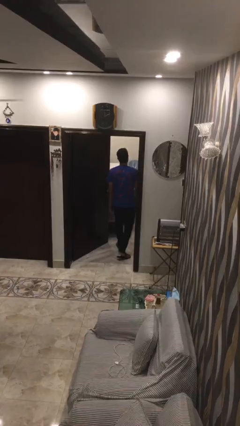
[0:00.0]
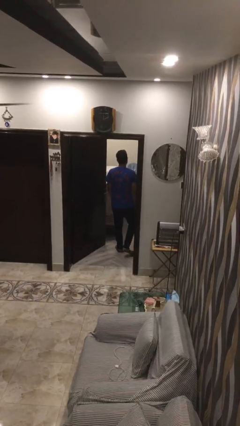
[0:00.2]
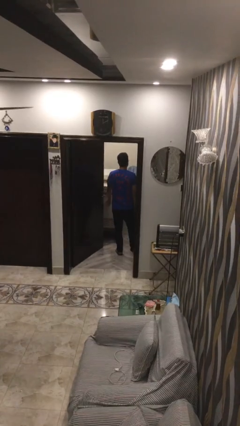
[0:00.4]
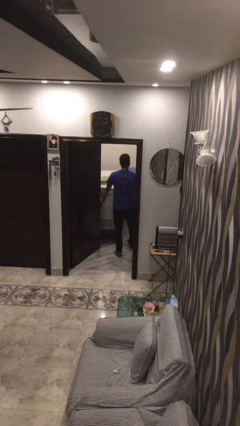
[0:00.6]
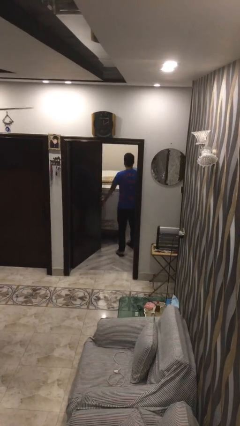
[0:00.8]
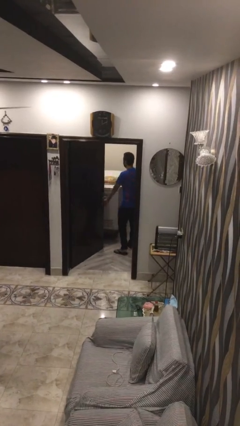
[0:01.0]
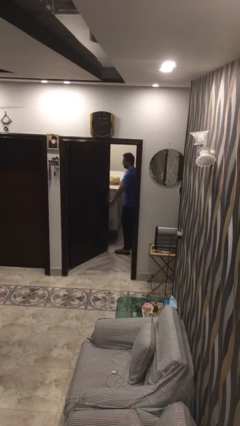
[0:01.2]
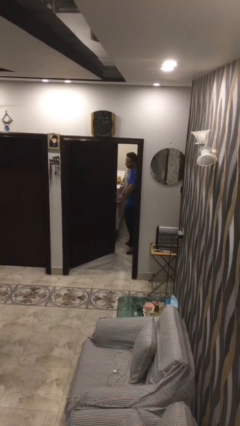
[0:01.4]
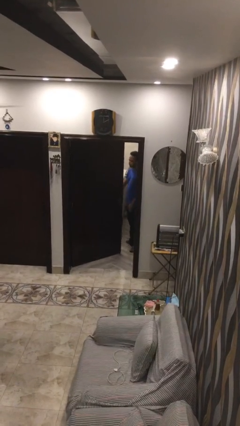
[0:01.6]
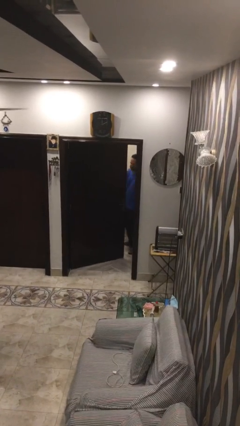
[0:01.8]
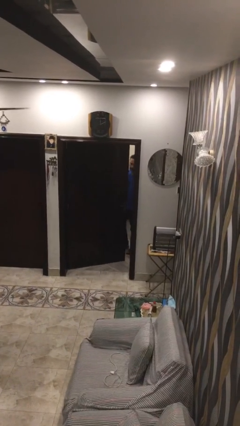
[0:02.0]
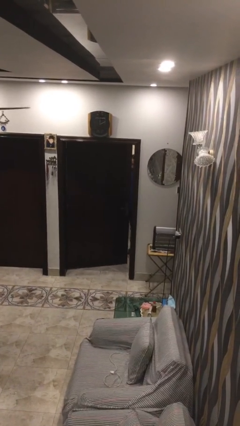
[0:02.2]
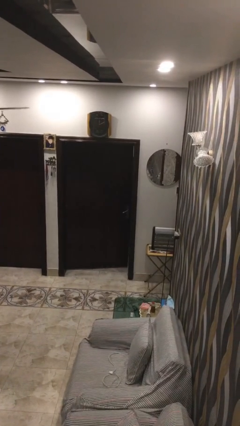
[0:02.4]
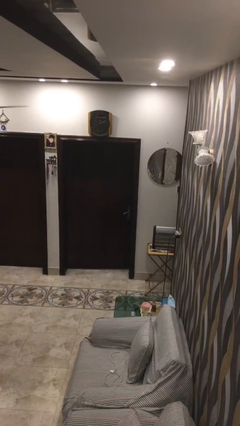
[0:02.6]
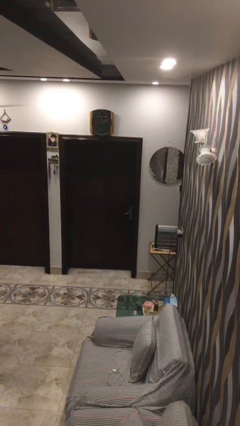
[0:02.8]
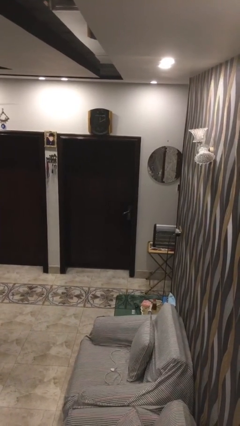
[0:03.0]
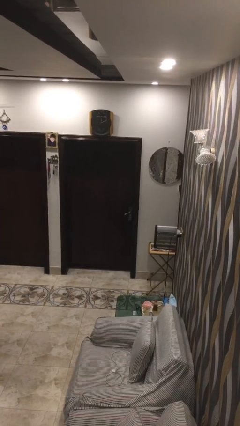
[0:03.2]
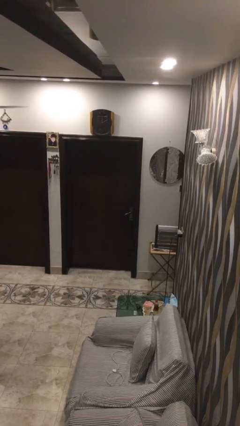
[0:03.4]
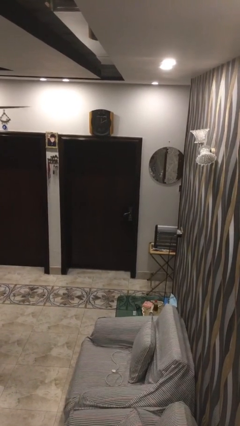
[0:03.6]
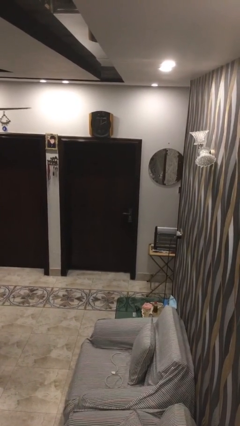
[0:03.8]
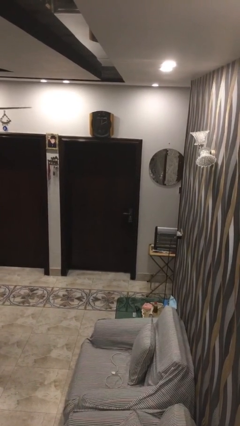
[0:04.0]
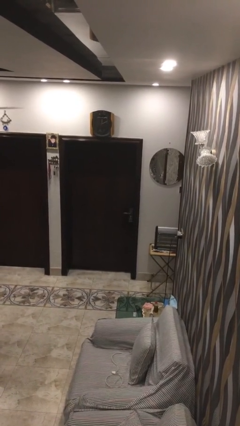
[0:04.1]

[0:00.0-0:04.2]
person closes facility door

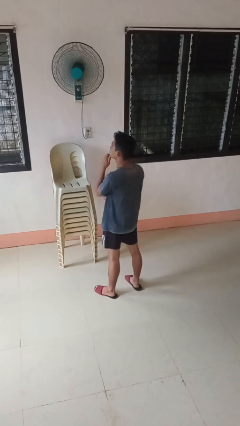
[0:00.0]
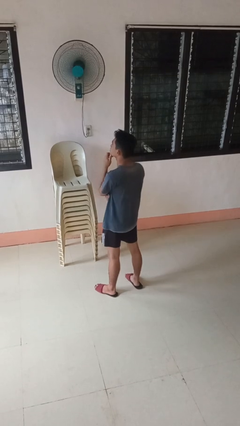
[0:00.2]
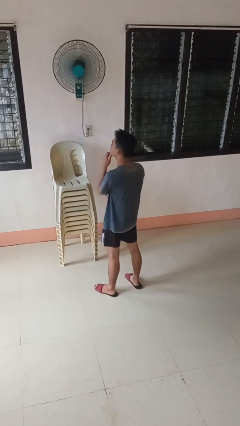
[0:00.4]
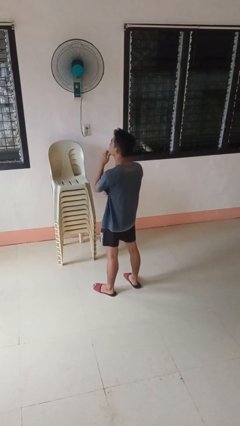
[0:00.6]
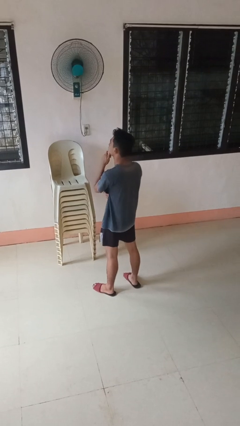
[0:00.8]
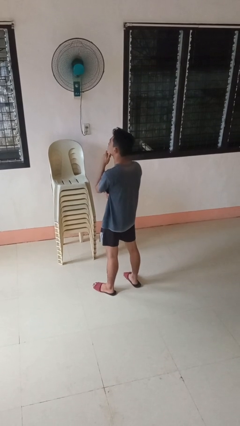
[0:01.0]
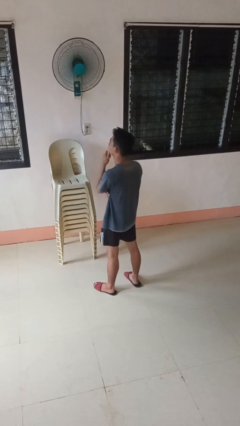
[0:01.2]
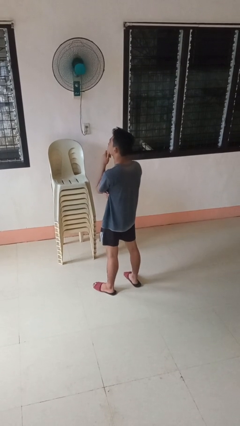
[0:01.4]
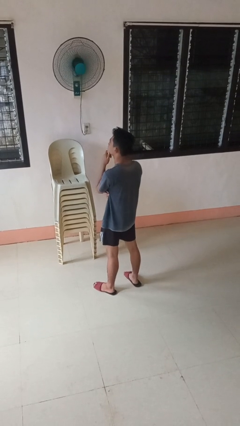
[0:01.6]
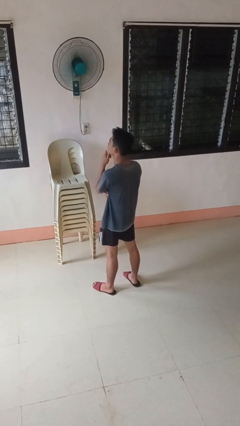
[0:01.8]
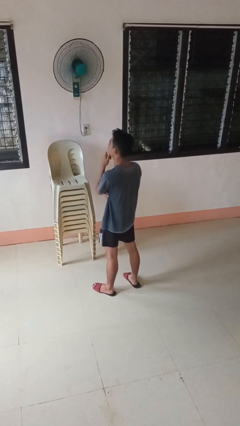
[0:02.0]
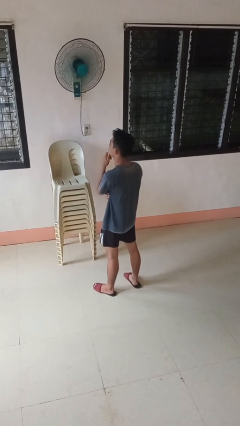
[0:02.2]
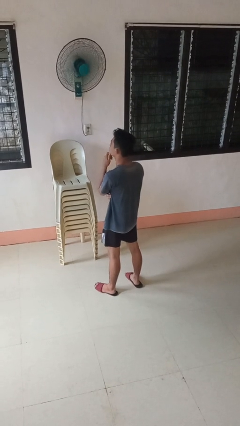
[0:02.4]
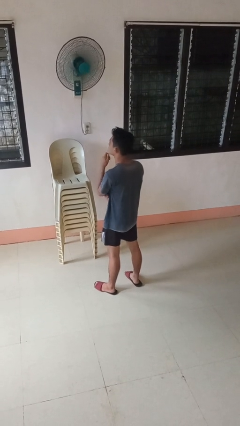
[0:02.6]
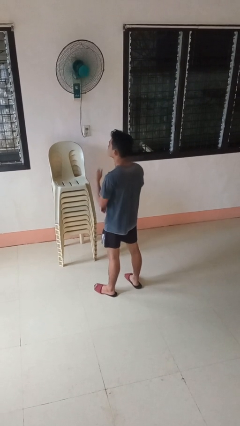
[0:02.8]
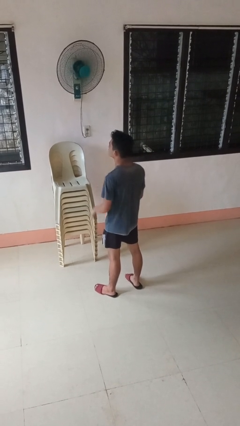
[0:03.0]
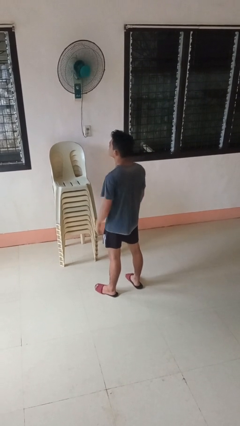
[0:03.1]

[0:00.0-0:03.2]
person strokes chin

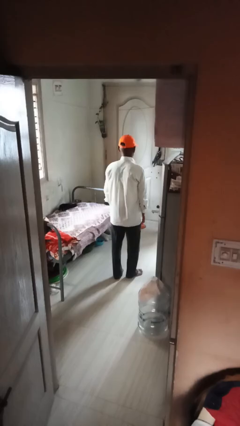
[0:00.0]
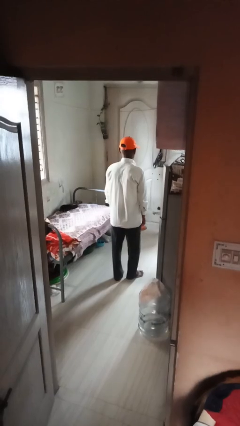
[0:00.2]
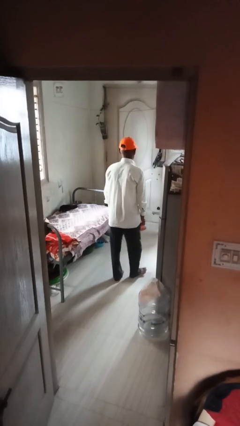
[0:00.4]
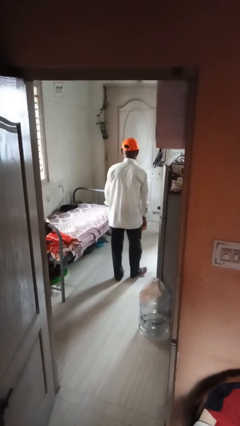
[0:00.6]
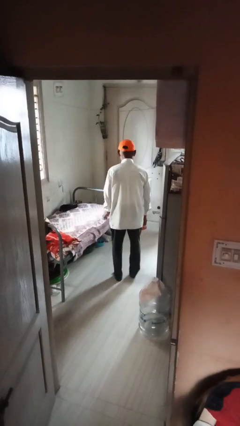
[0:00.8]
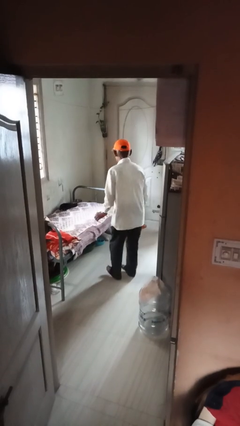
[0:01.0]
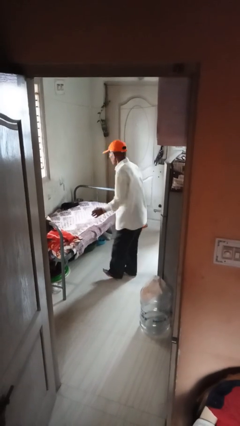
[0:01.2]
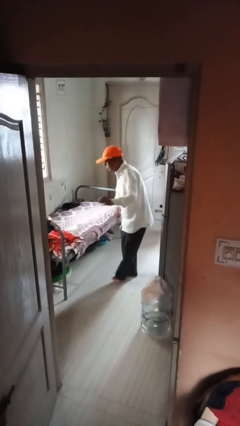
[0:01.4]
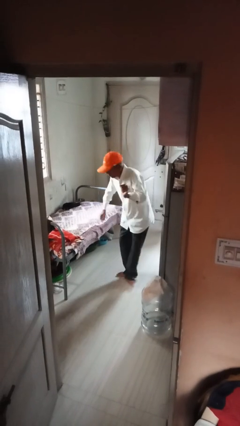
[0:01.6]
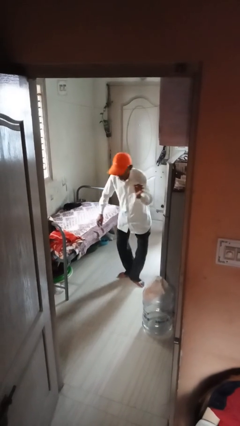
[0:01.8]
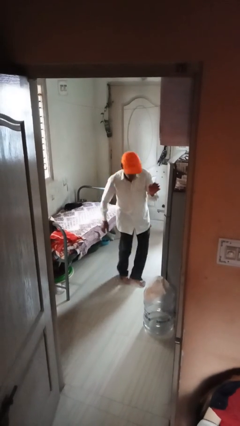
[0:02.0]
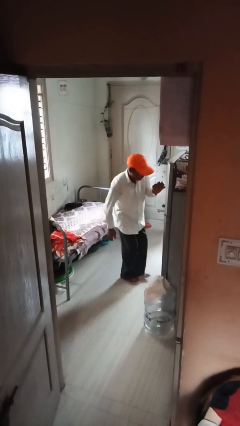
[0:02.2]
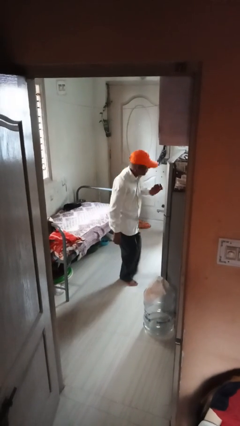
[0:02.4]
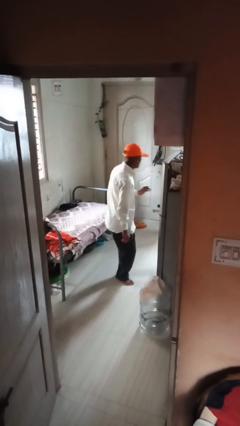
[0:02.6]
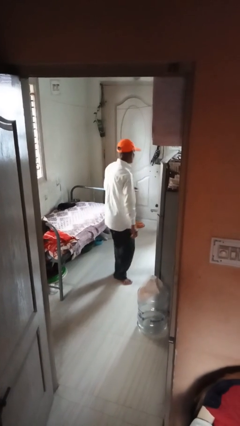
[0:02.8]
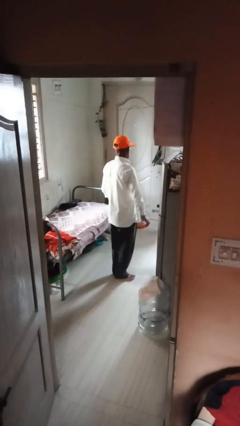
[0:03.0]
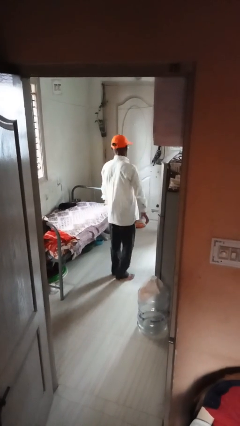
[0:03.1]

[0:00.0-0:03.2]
person twirls

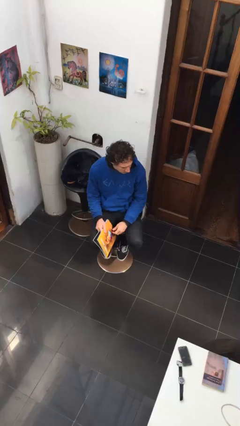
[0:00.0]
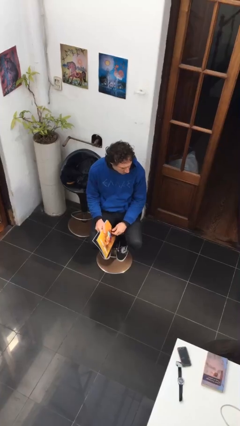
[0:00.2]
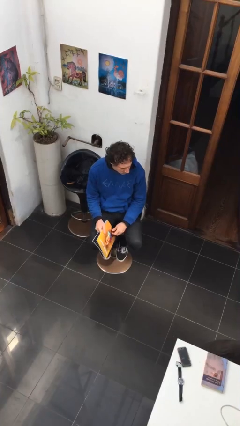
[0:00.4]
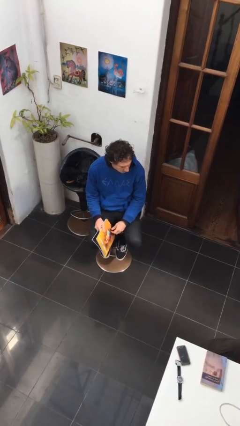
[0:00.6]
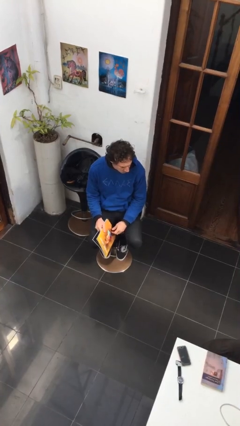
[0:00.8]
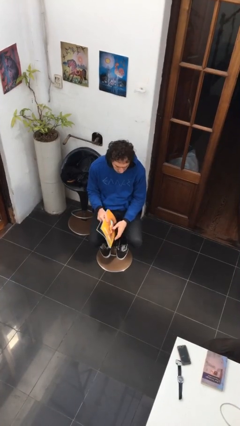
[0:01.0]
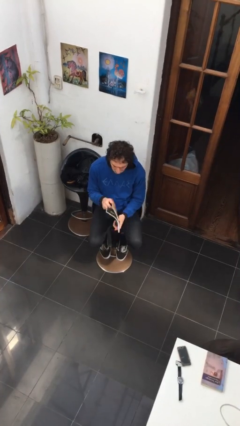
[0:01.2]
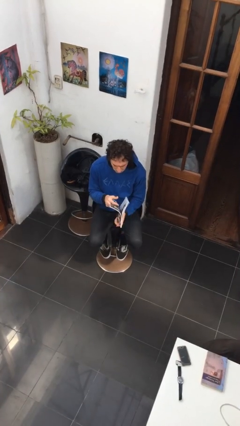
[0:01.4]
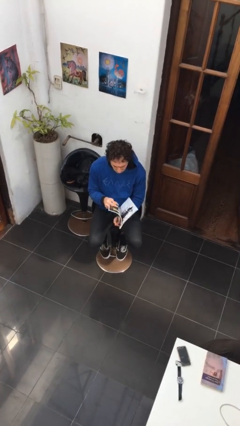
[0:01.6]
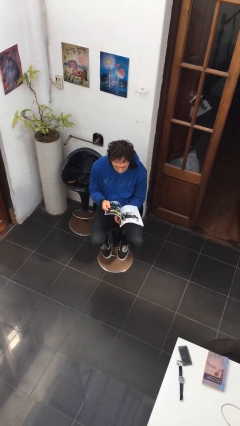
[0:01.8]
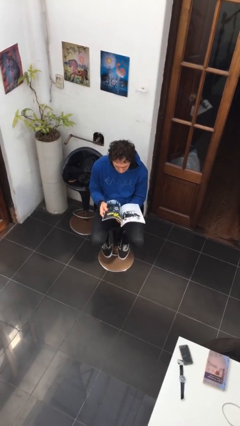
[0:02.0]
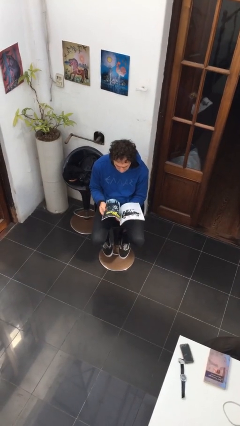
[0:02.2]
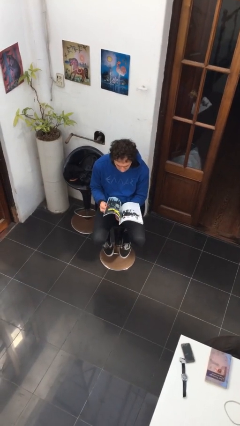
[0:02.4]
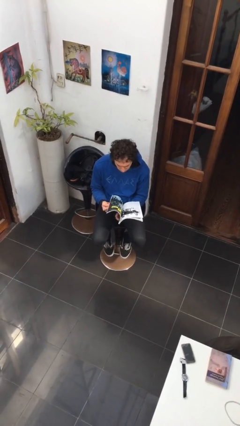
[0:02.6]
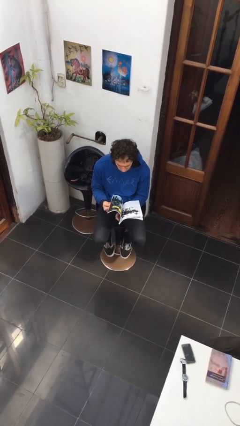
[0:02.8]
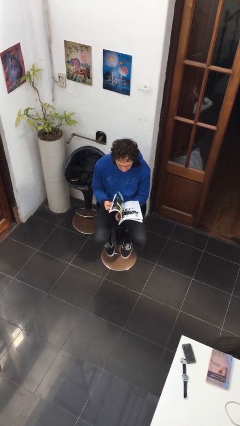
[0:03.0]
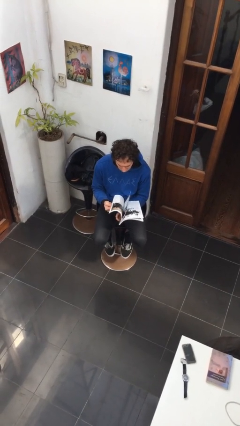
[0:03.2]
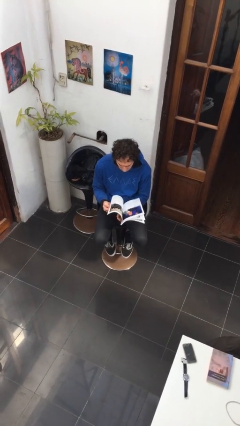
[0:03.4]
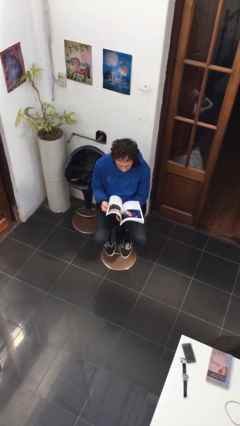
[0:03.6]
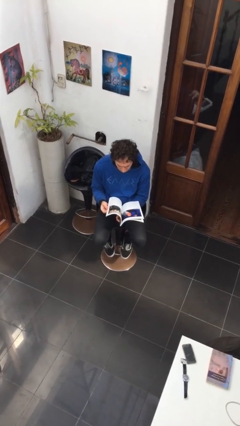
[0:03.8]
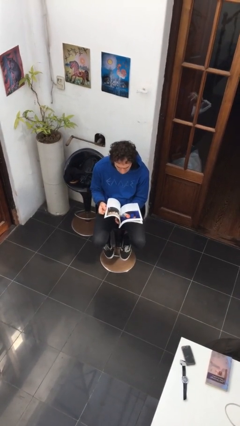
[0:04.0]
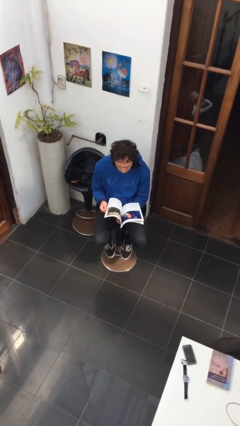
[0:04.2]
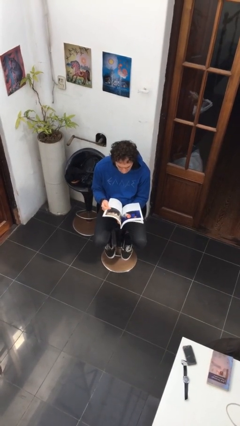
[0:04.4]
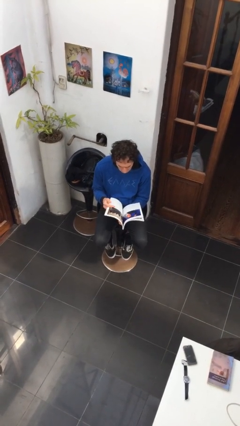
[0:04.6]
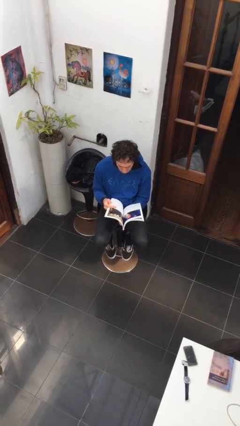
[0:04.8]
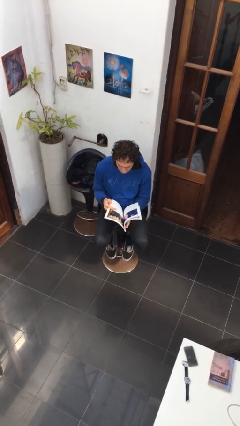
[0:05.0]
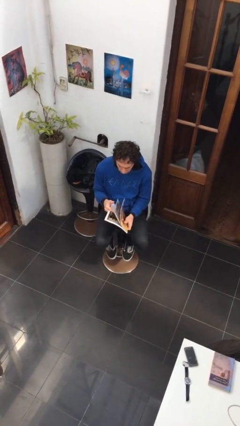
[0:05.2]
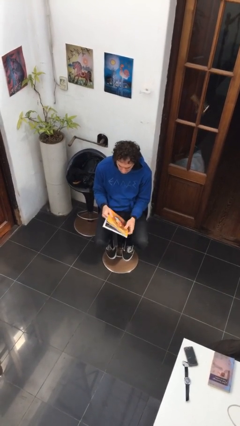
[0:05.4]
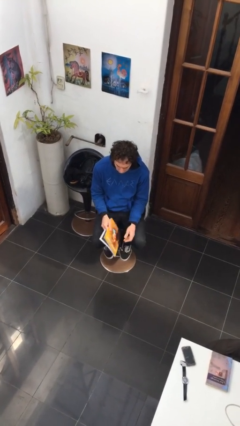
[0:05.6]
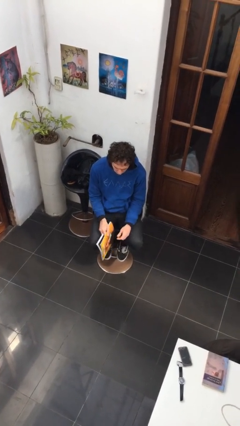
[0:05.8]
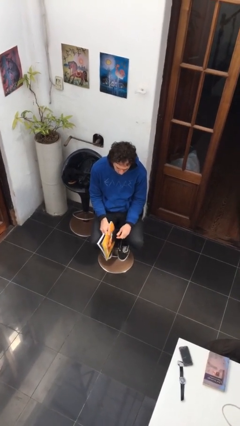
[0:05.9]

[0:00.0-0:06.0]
person reads magazine

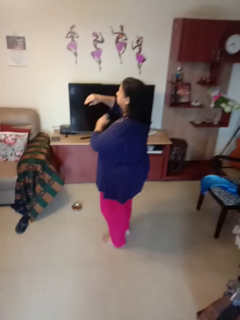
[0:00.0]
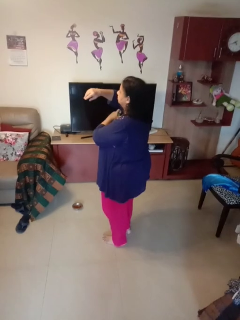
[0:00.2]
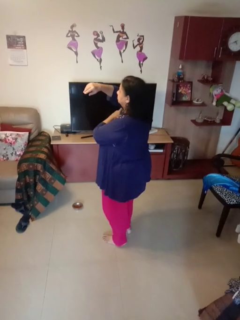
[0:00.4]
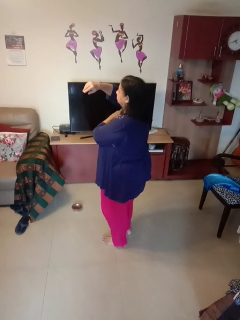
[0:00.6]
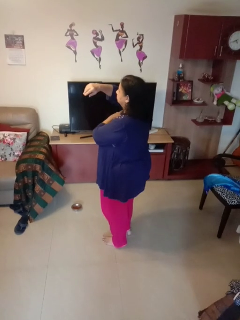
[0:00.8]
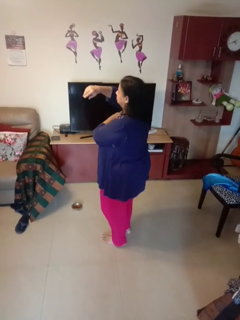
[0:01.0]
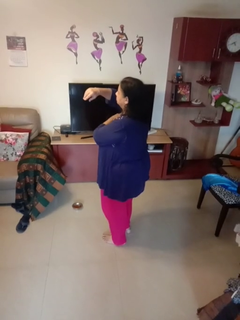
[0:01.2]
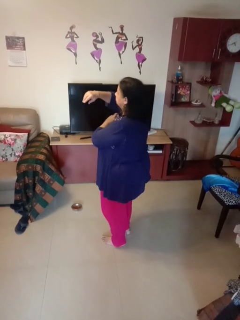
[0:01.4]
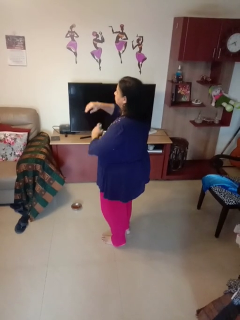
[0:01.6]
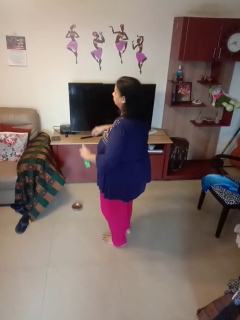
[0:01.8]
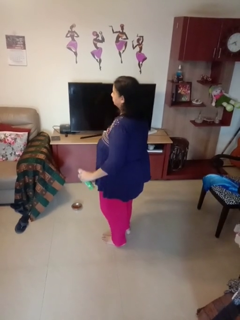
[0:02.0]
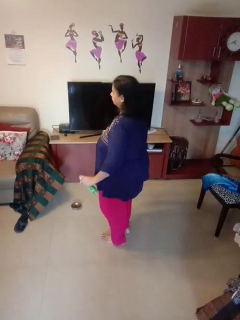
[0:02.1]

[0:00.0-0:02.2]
person applies deodorant
